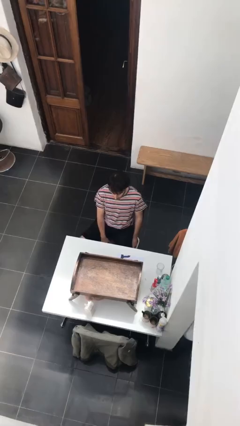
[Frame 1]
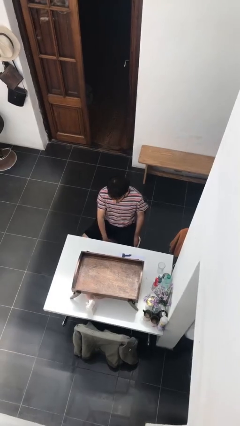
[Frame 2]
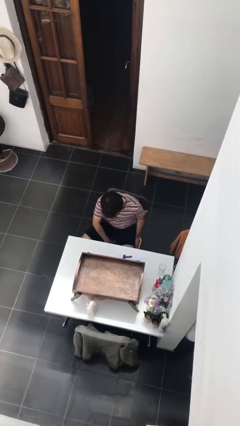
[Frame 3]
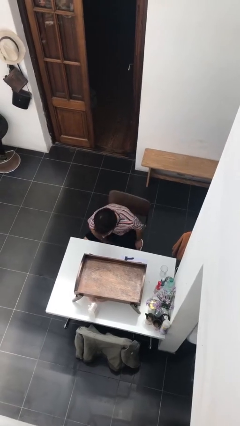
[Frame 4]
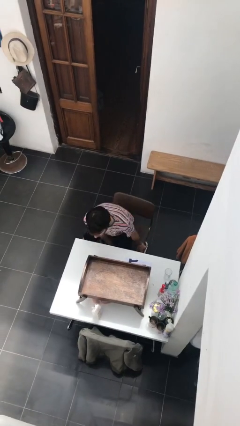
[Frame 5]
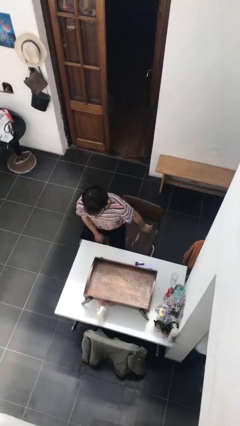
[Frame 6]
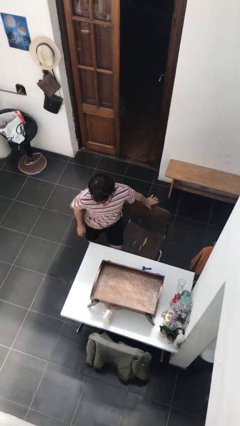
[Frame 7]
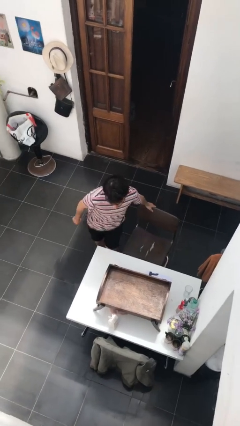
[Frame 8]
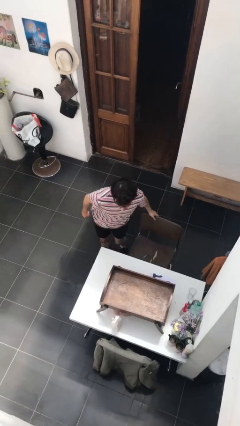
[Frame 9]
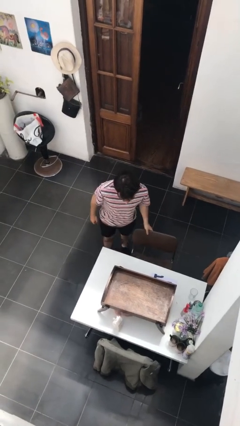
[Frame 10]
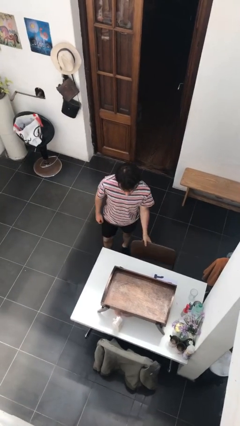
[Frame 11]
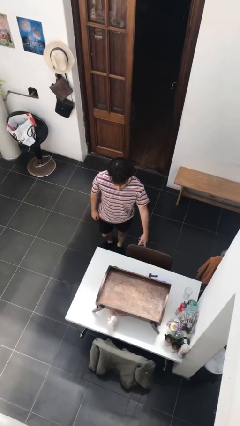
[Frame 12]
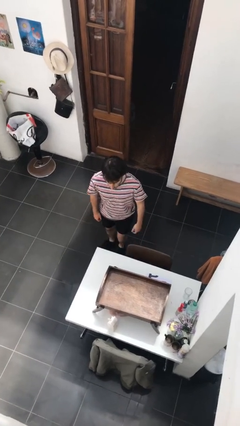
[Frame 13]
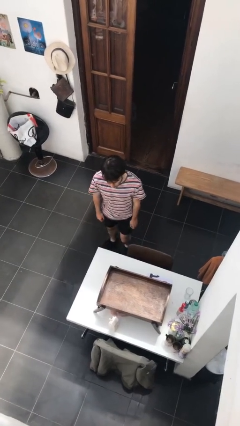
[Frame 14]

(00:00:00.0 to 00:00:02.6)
person stands up

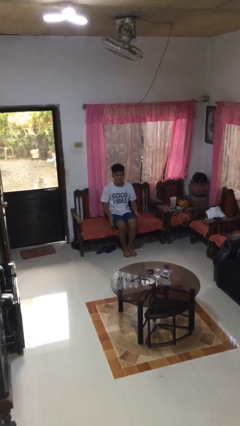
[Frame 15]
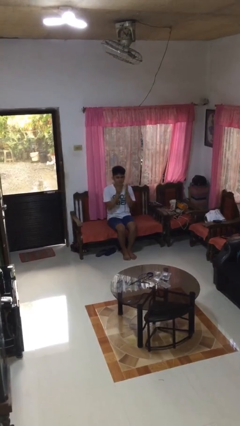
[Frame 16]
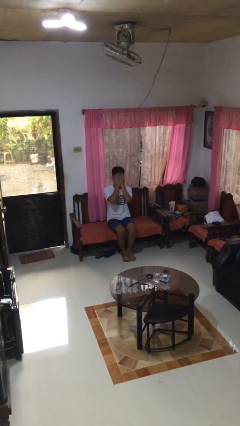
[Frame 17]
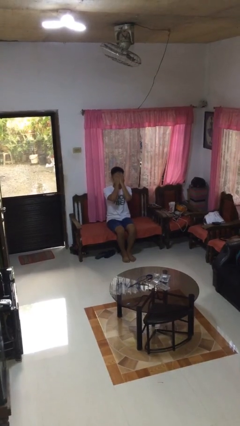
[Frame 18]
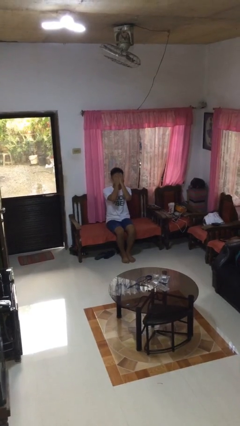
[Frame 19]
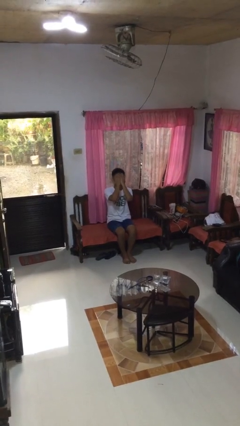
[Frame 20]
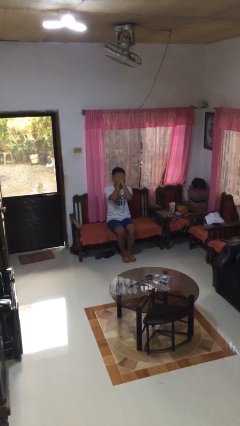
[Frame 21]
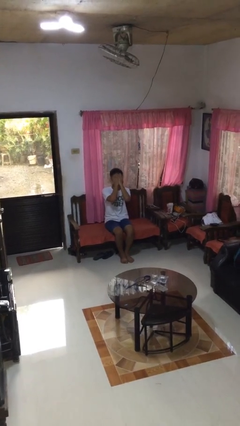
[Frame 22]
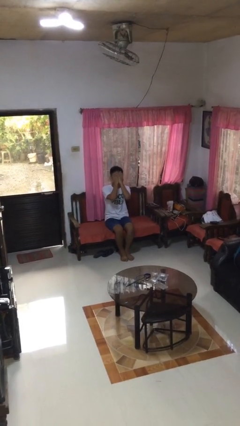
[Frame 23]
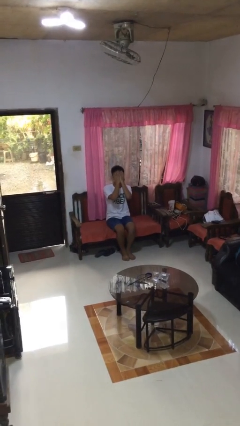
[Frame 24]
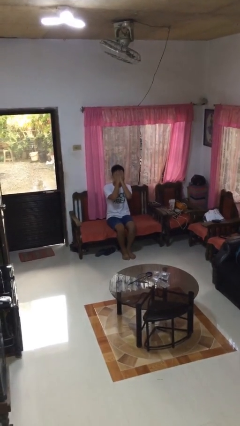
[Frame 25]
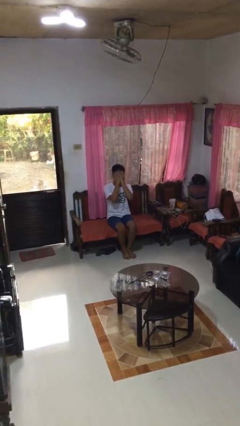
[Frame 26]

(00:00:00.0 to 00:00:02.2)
person covers face with hands

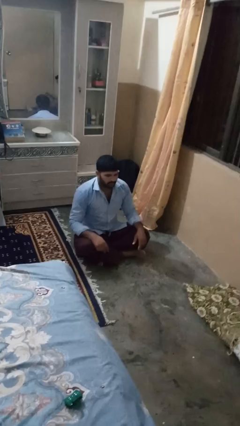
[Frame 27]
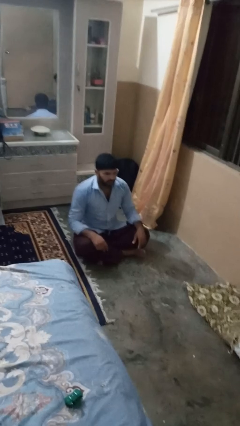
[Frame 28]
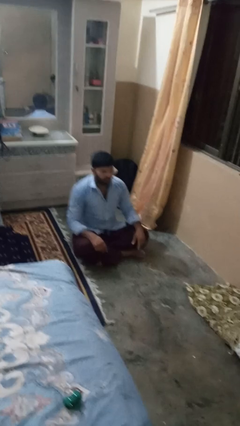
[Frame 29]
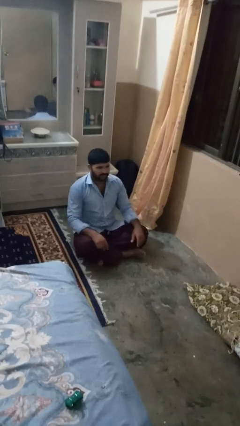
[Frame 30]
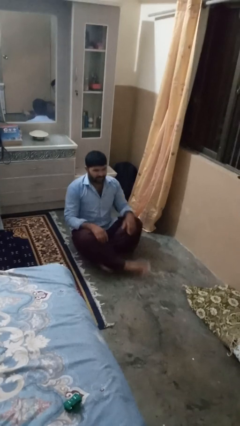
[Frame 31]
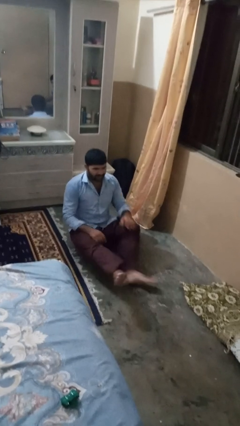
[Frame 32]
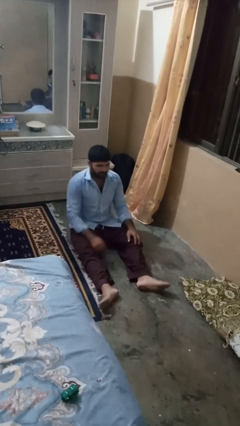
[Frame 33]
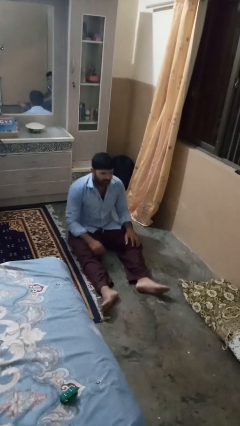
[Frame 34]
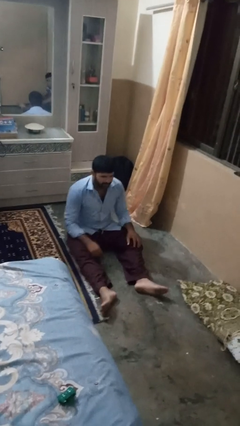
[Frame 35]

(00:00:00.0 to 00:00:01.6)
person crosses legs

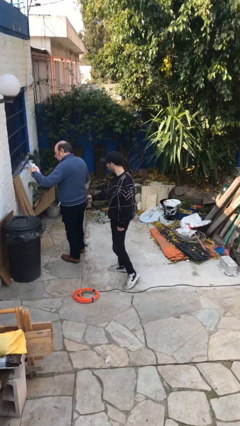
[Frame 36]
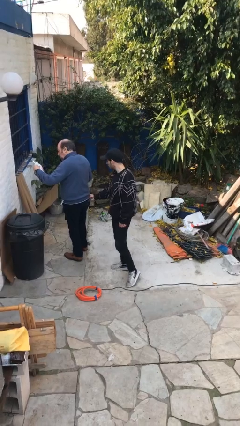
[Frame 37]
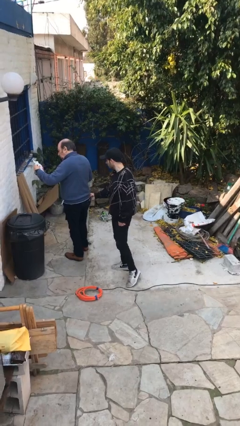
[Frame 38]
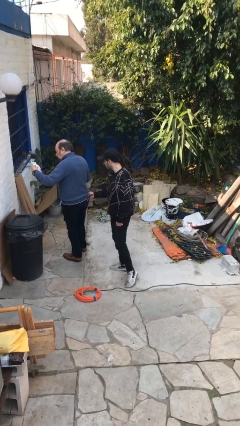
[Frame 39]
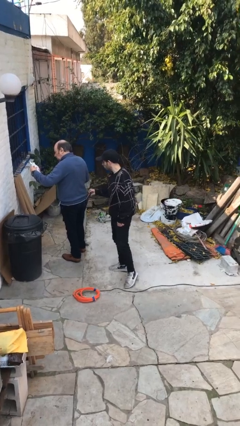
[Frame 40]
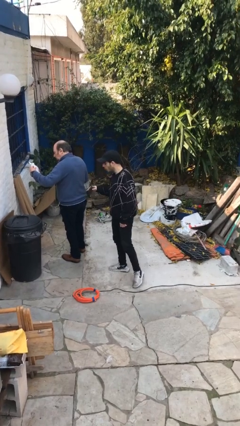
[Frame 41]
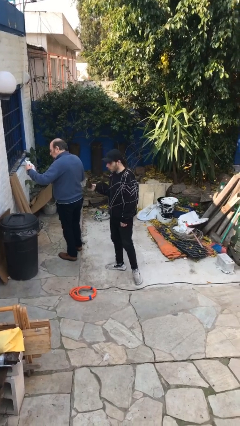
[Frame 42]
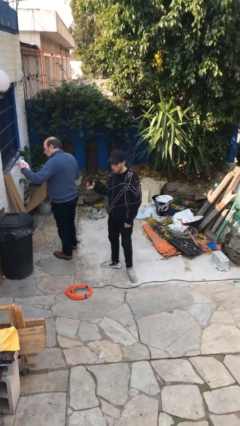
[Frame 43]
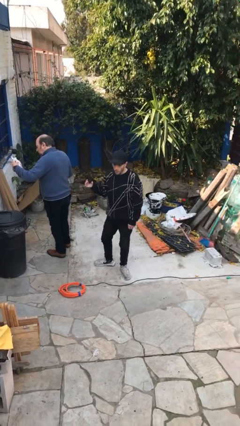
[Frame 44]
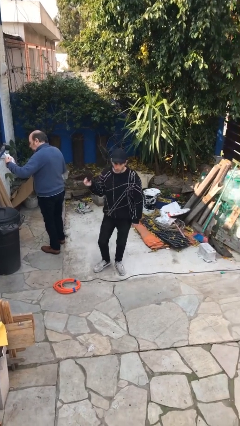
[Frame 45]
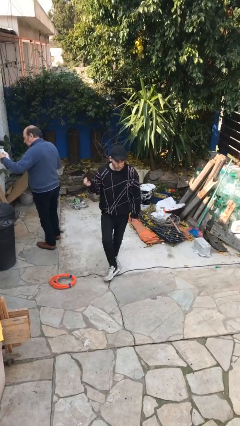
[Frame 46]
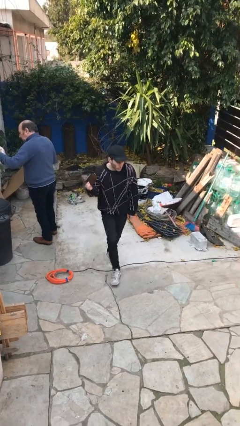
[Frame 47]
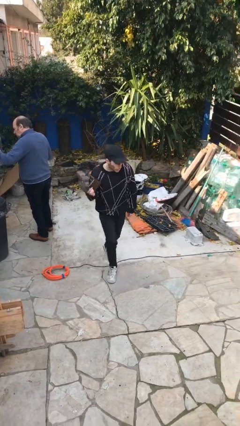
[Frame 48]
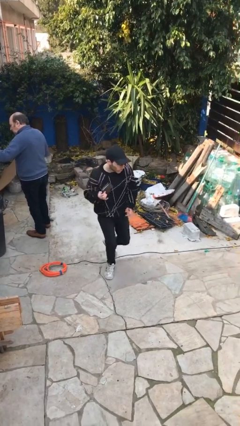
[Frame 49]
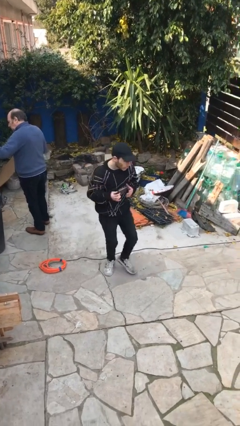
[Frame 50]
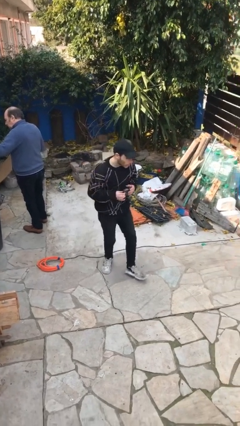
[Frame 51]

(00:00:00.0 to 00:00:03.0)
person steals object from person

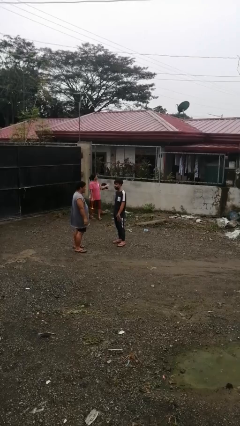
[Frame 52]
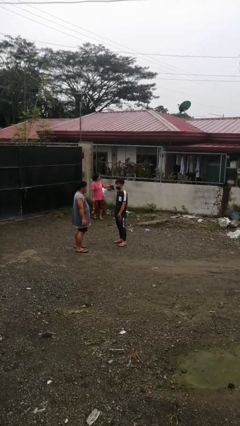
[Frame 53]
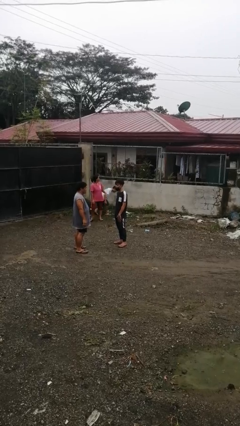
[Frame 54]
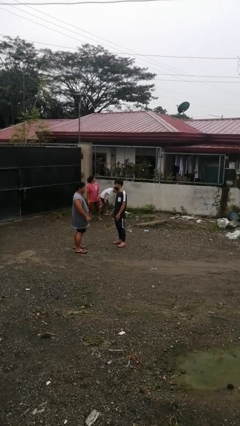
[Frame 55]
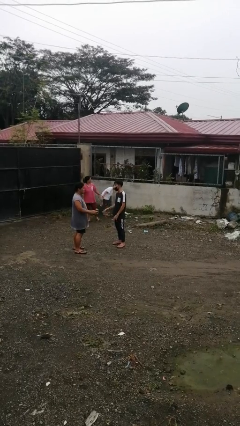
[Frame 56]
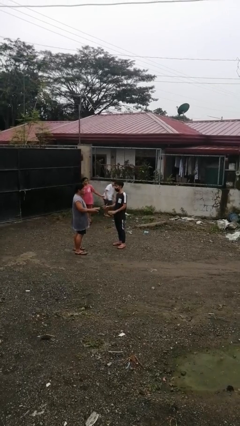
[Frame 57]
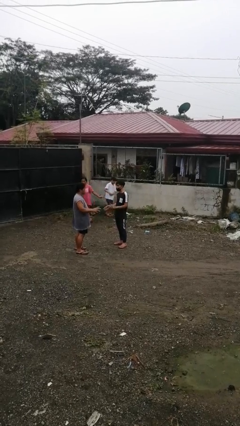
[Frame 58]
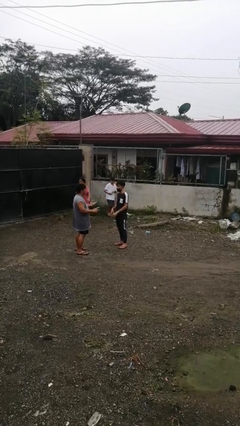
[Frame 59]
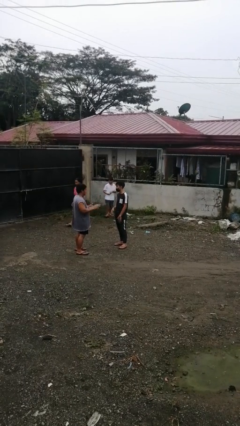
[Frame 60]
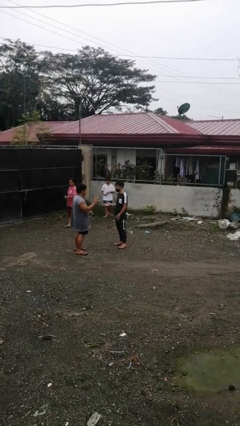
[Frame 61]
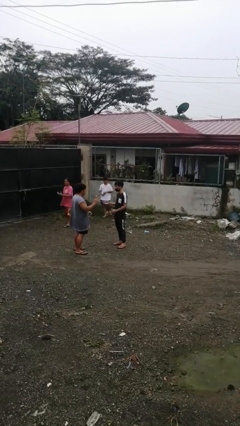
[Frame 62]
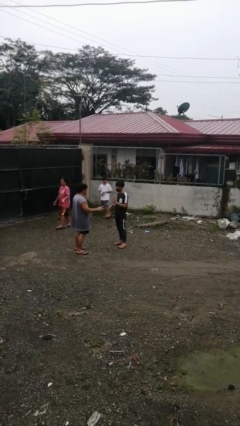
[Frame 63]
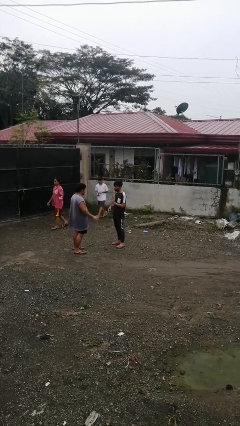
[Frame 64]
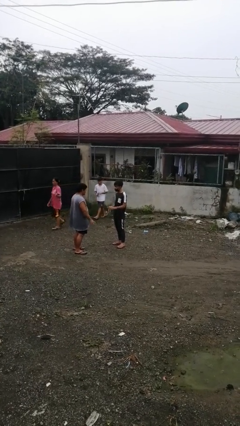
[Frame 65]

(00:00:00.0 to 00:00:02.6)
person talks to person

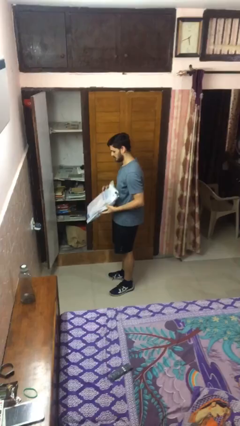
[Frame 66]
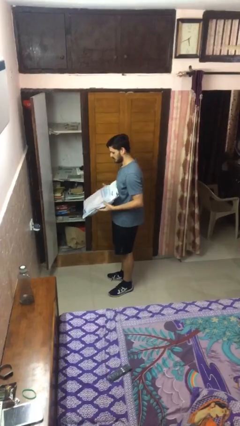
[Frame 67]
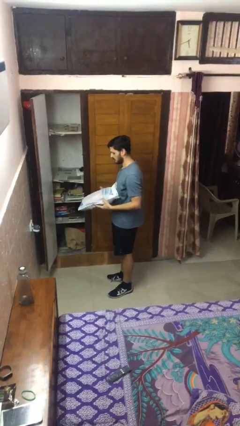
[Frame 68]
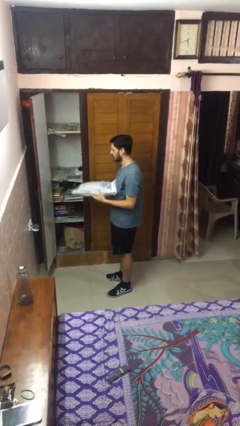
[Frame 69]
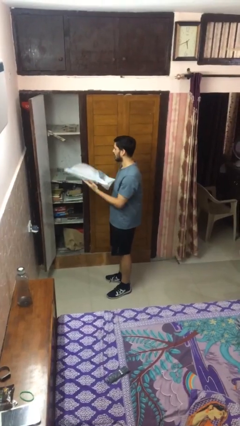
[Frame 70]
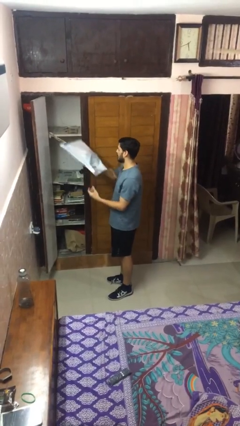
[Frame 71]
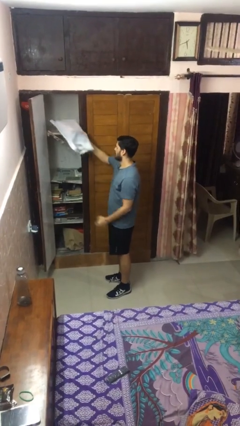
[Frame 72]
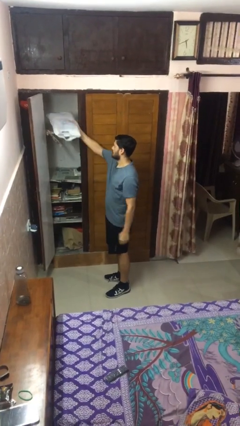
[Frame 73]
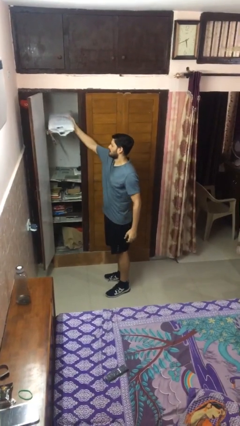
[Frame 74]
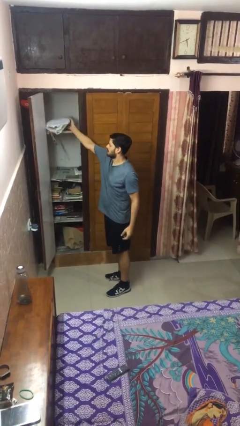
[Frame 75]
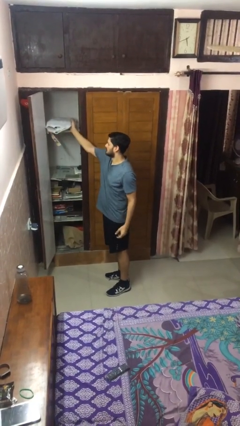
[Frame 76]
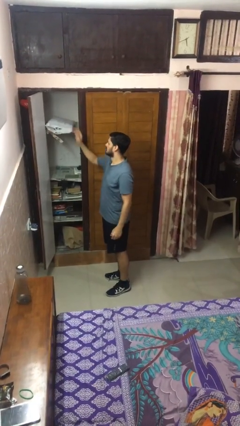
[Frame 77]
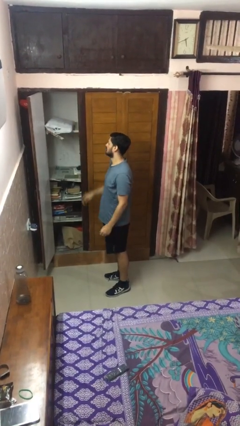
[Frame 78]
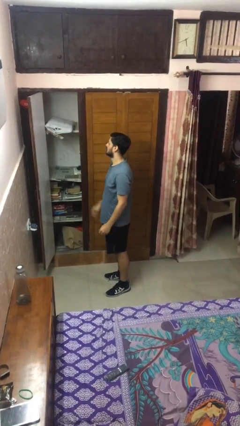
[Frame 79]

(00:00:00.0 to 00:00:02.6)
person puts down object on shelf

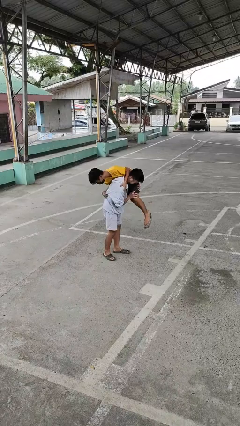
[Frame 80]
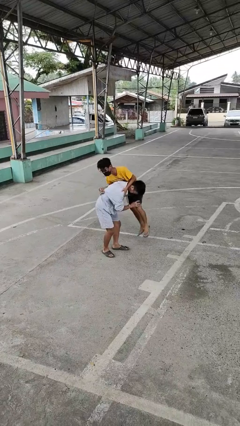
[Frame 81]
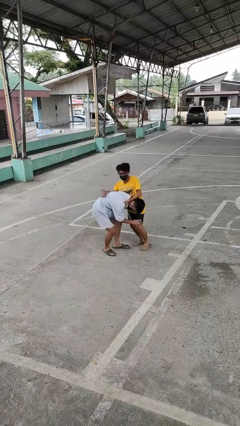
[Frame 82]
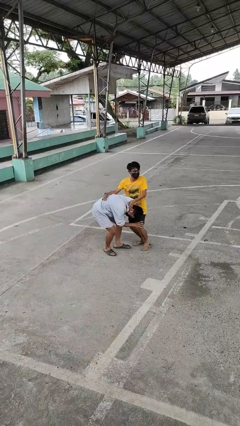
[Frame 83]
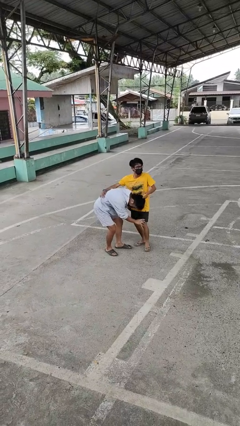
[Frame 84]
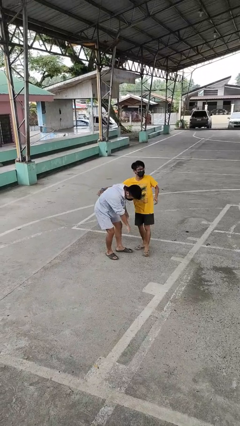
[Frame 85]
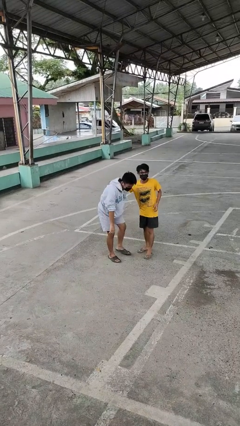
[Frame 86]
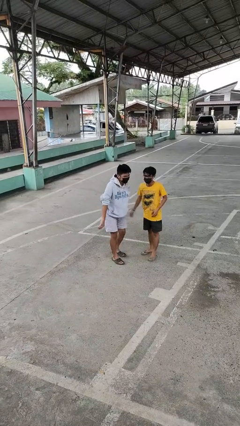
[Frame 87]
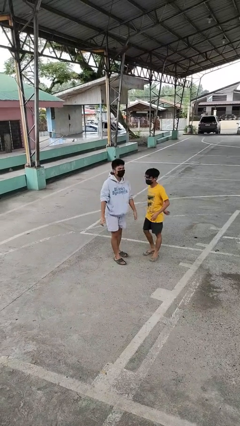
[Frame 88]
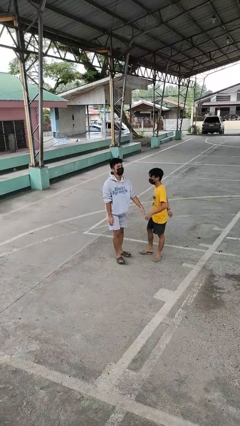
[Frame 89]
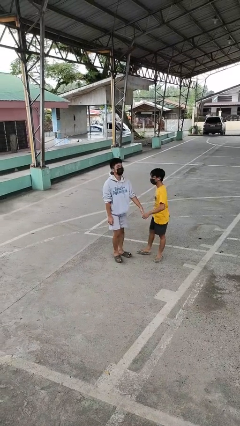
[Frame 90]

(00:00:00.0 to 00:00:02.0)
person puts down person

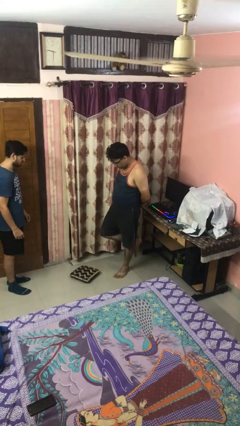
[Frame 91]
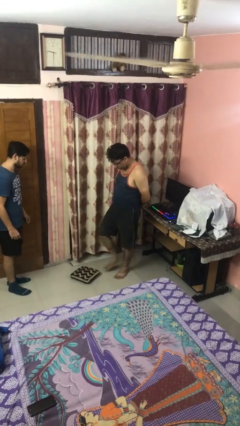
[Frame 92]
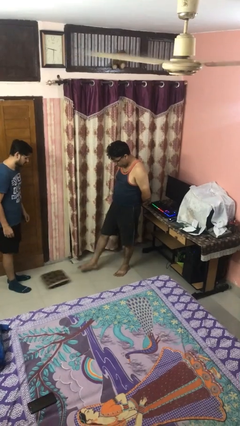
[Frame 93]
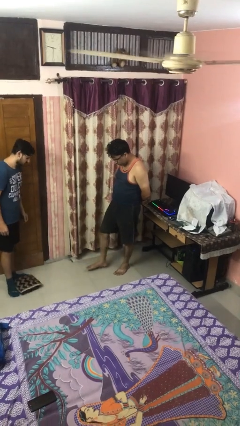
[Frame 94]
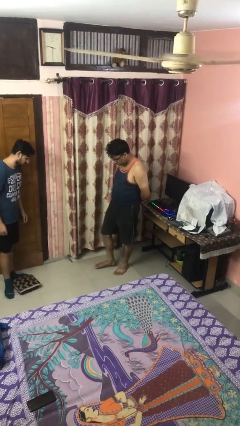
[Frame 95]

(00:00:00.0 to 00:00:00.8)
person kicks object to person
